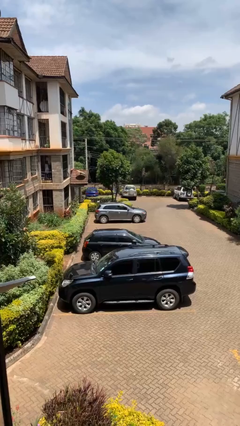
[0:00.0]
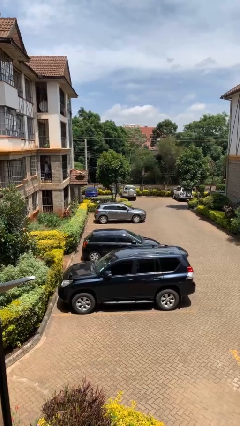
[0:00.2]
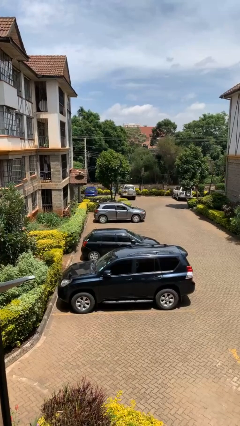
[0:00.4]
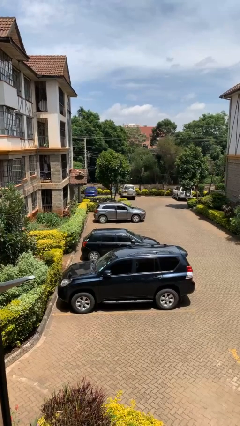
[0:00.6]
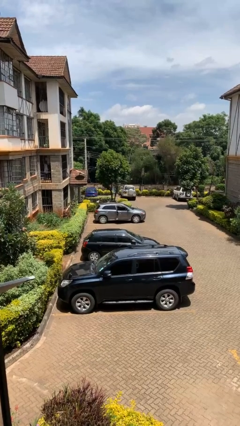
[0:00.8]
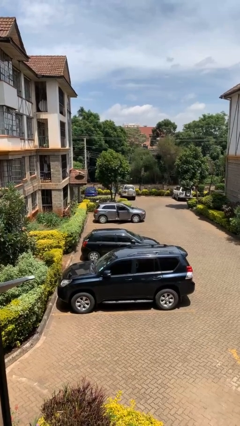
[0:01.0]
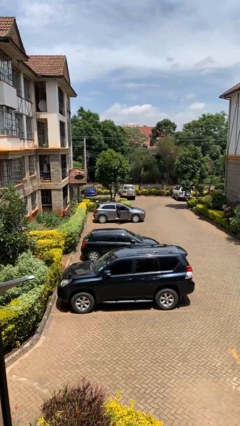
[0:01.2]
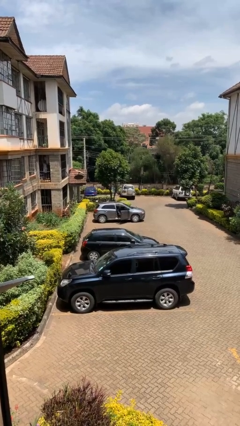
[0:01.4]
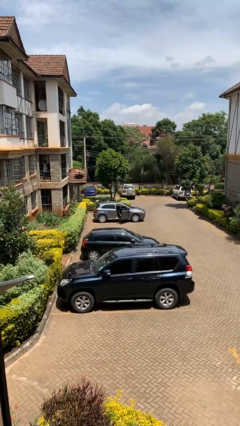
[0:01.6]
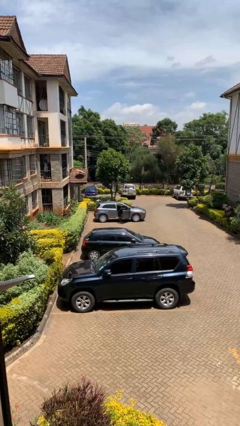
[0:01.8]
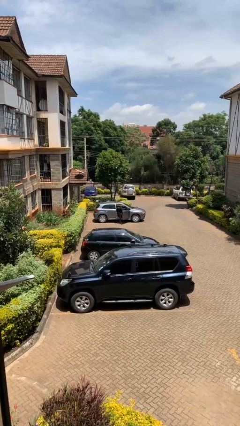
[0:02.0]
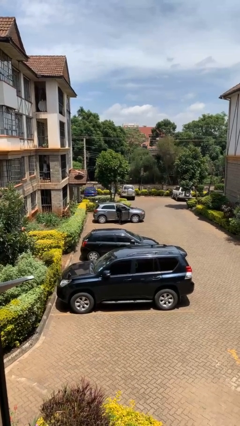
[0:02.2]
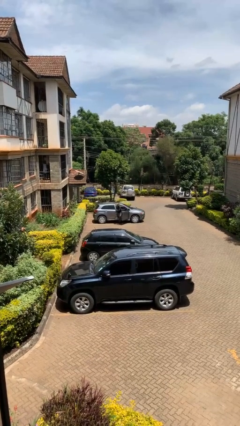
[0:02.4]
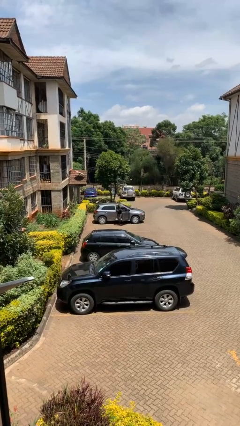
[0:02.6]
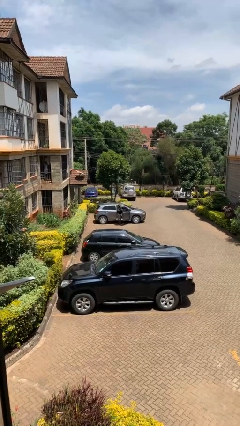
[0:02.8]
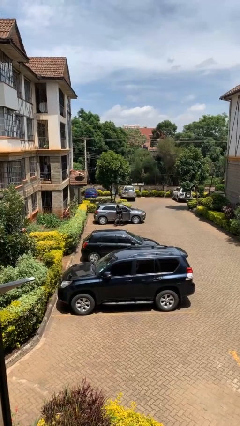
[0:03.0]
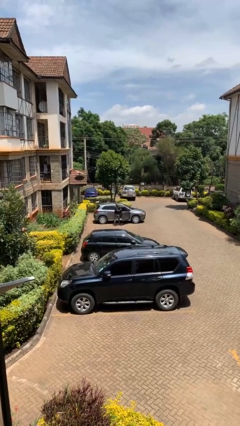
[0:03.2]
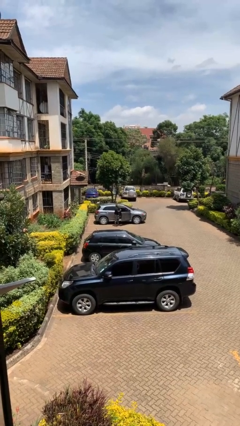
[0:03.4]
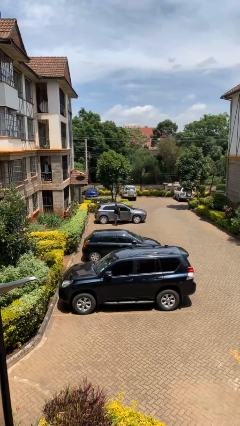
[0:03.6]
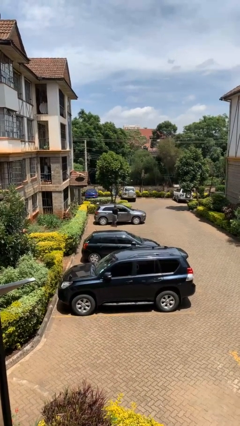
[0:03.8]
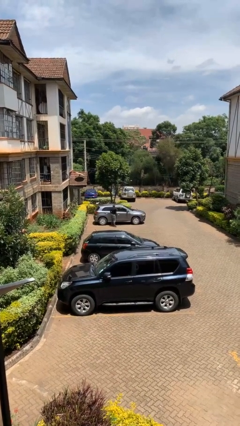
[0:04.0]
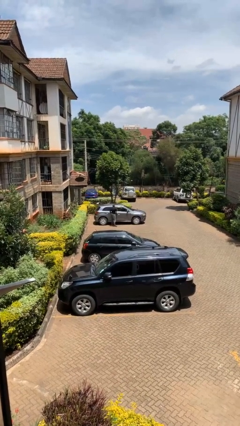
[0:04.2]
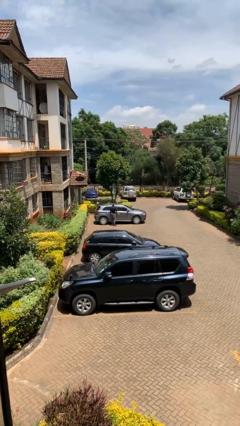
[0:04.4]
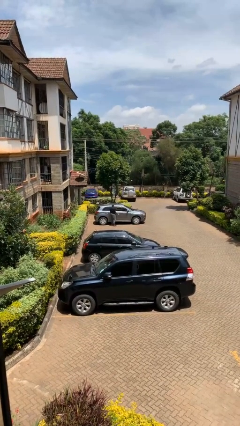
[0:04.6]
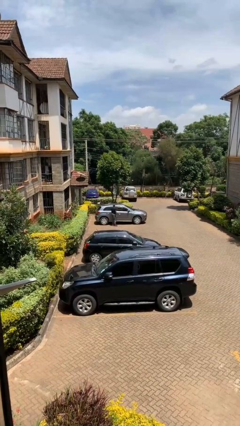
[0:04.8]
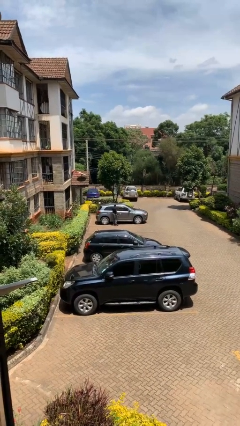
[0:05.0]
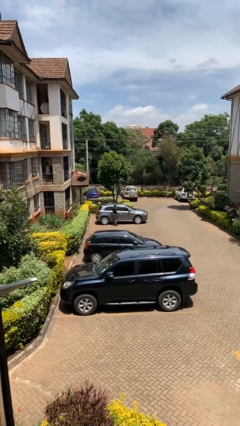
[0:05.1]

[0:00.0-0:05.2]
car drops off person

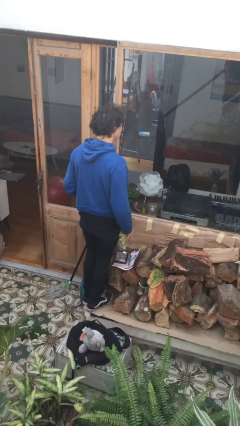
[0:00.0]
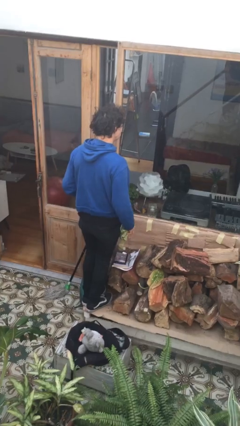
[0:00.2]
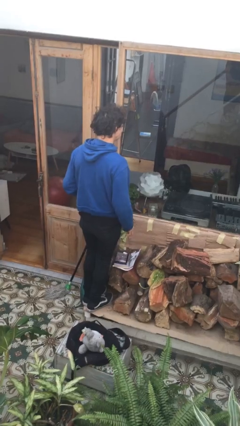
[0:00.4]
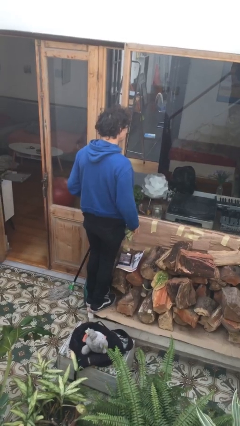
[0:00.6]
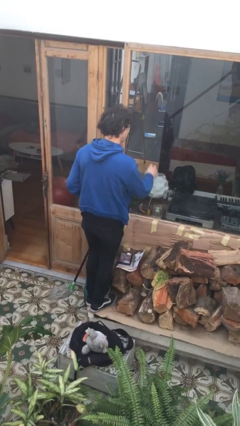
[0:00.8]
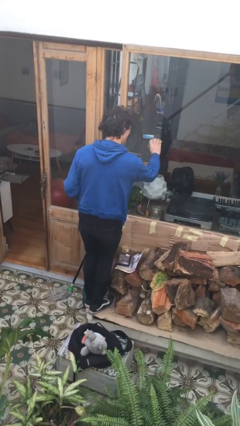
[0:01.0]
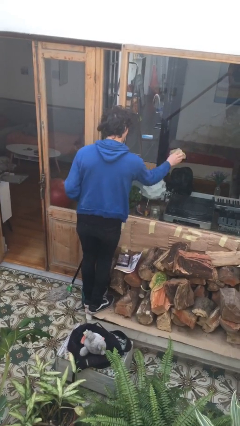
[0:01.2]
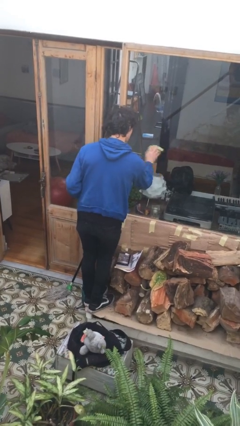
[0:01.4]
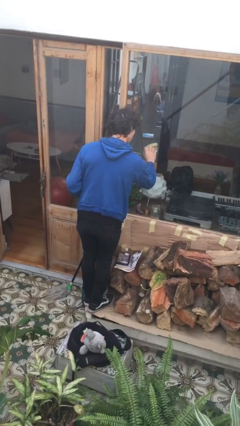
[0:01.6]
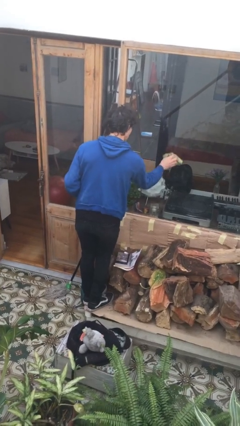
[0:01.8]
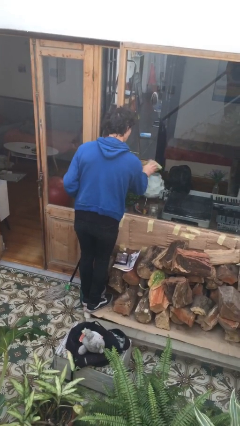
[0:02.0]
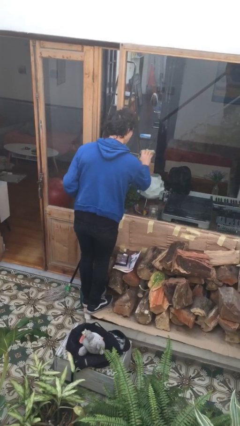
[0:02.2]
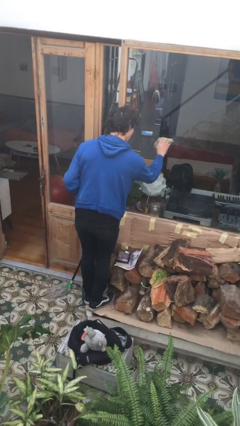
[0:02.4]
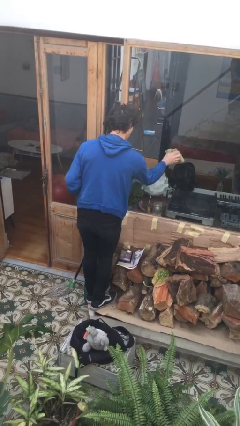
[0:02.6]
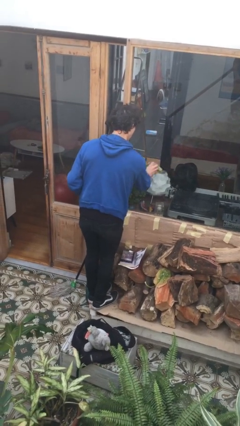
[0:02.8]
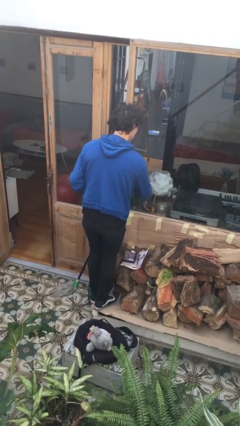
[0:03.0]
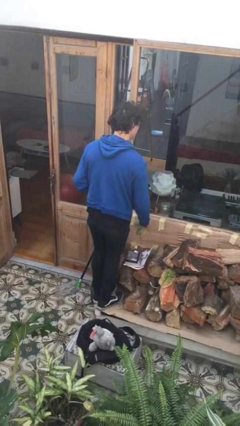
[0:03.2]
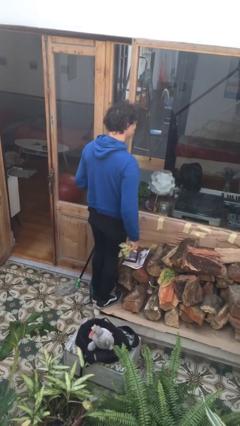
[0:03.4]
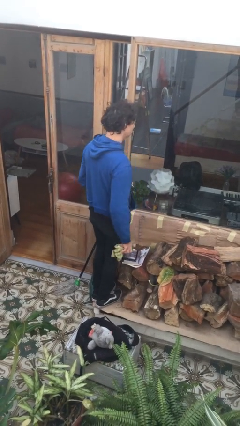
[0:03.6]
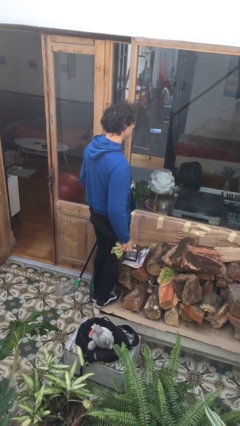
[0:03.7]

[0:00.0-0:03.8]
person washes window

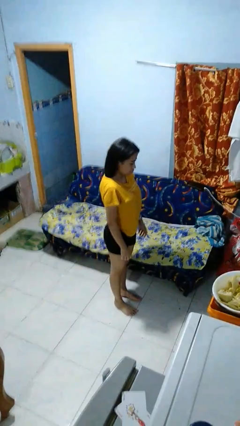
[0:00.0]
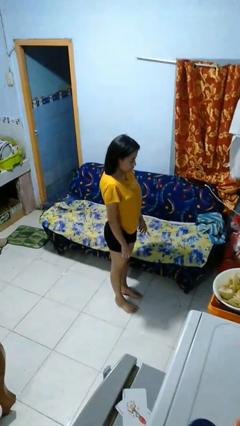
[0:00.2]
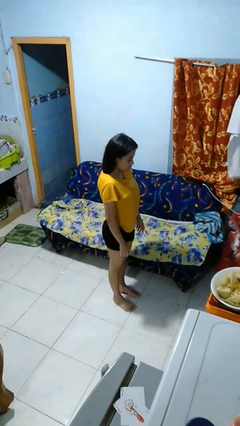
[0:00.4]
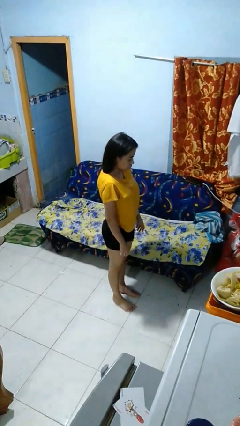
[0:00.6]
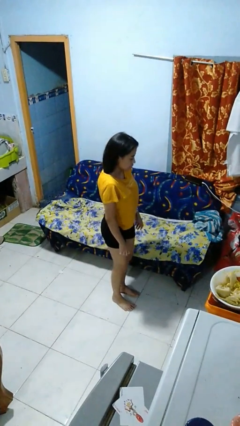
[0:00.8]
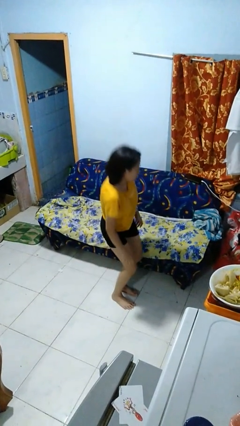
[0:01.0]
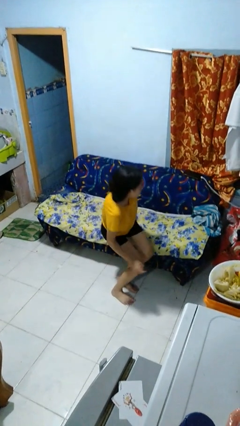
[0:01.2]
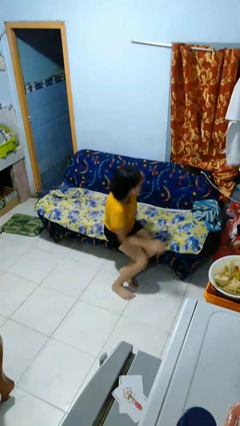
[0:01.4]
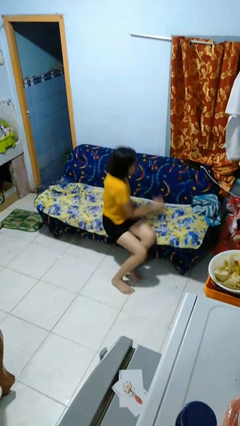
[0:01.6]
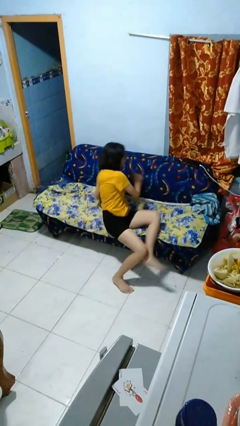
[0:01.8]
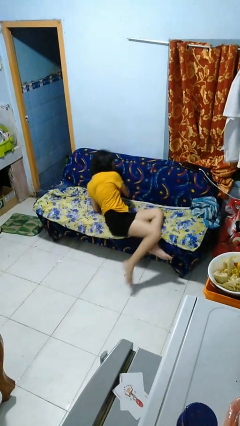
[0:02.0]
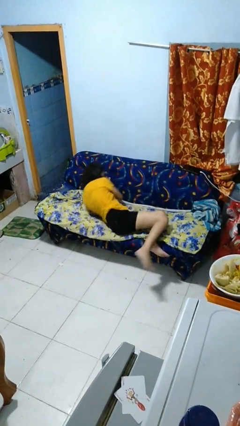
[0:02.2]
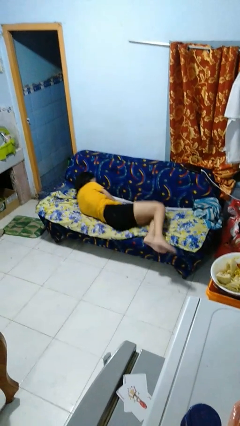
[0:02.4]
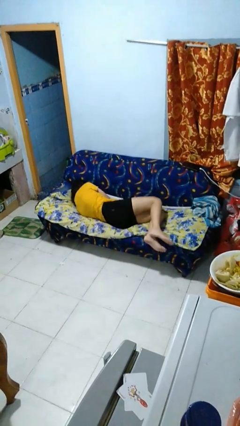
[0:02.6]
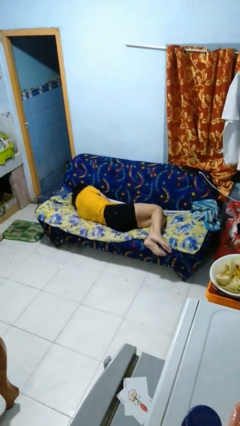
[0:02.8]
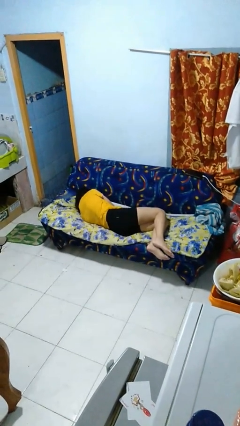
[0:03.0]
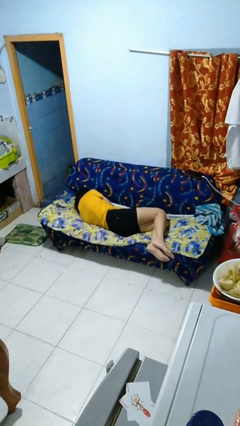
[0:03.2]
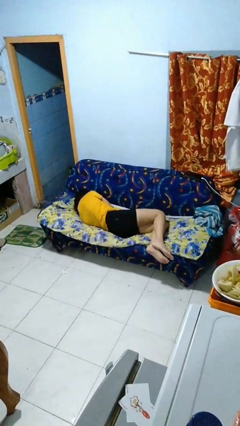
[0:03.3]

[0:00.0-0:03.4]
person lies down on couch

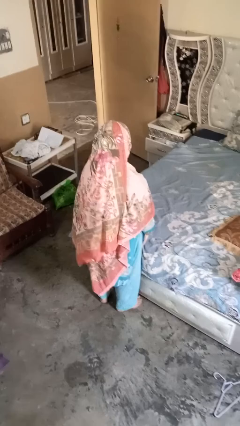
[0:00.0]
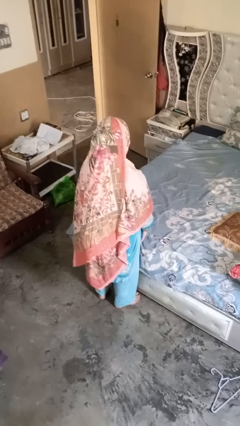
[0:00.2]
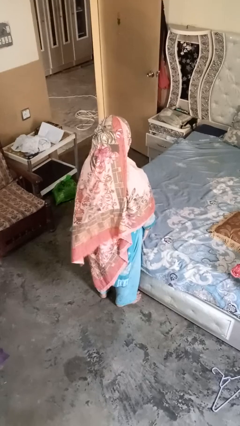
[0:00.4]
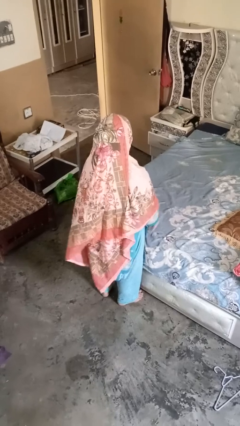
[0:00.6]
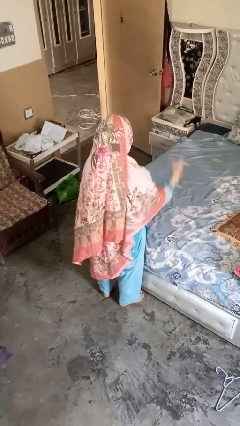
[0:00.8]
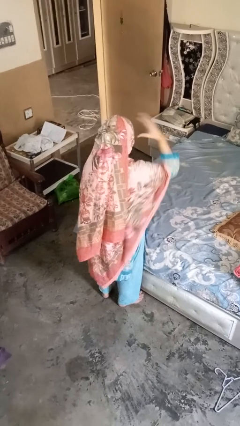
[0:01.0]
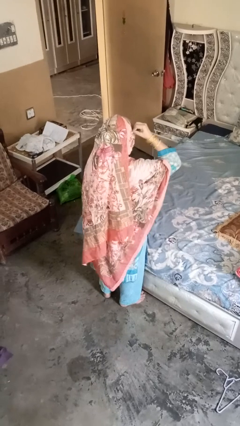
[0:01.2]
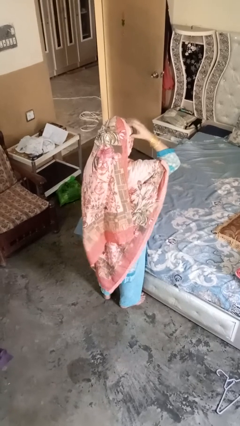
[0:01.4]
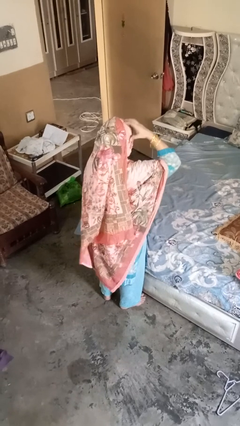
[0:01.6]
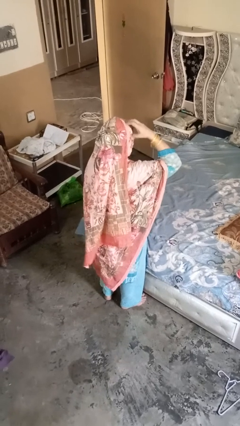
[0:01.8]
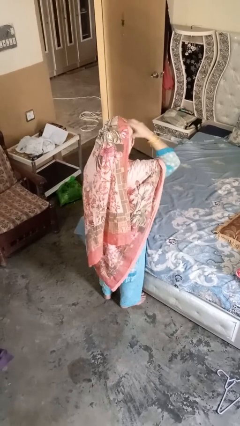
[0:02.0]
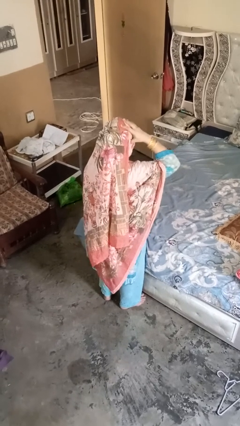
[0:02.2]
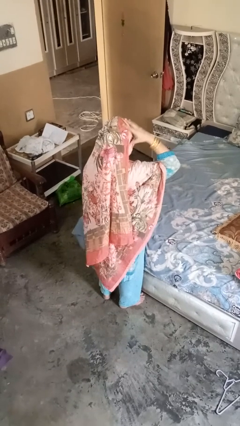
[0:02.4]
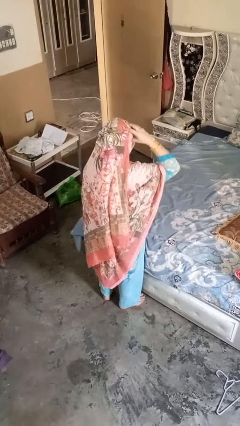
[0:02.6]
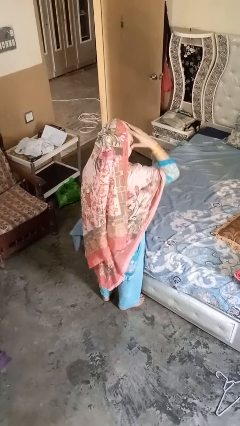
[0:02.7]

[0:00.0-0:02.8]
person strokes hair

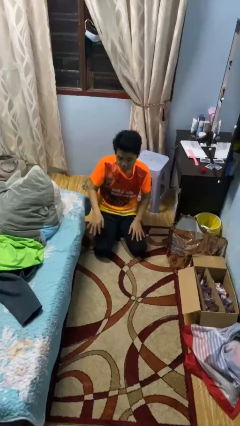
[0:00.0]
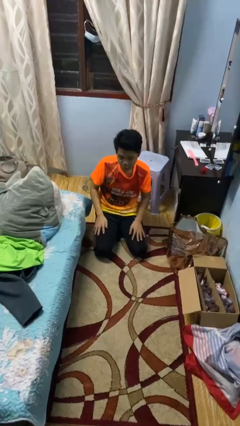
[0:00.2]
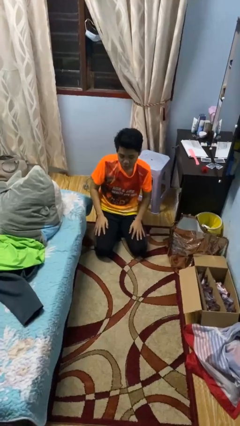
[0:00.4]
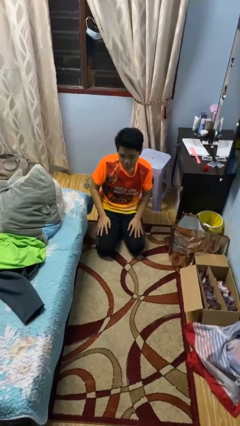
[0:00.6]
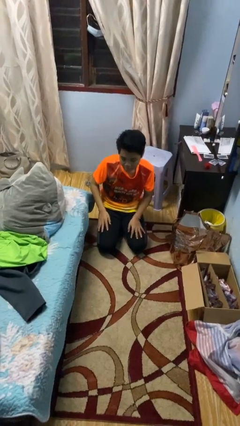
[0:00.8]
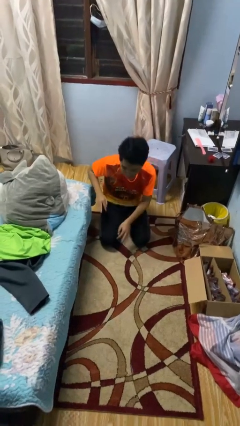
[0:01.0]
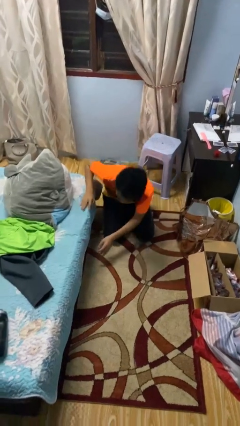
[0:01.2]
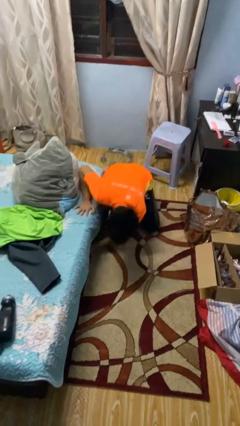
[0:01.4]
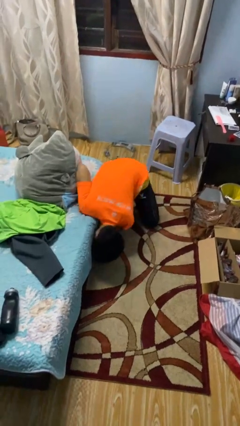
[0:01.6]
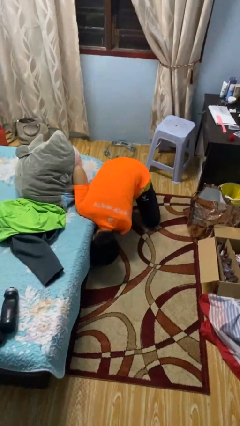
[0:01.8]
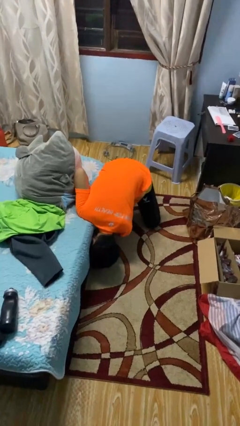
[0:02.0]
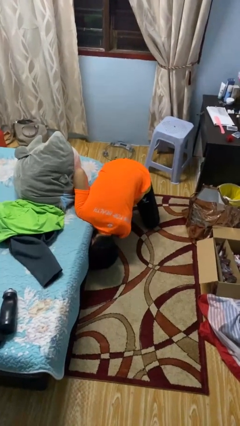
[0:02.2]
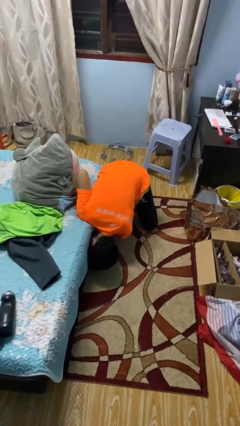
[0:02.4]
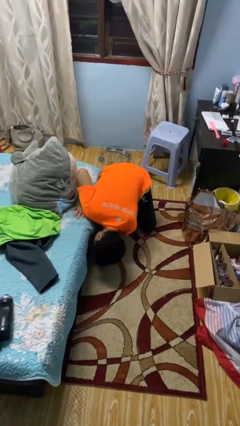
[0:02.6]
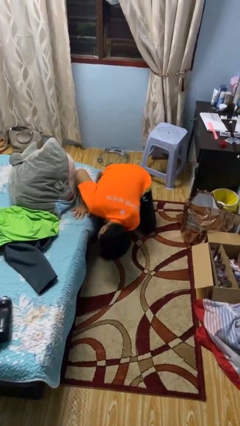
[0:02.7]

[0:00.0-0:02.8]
person searches under bed
